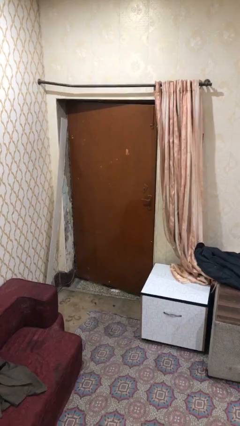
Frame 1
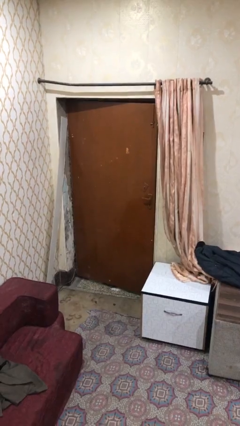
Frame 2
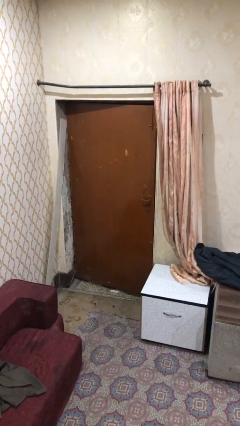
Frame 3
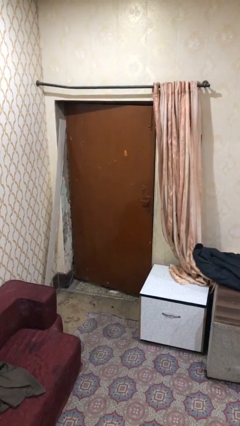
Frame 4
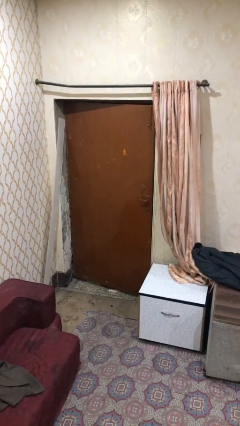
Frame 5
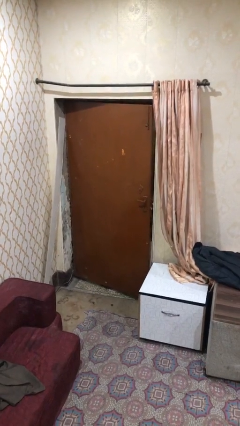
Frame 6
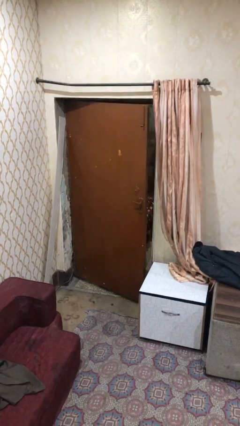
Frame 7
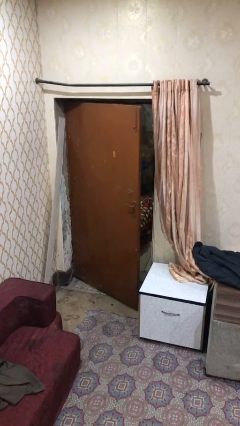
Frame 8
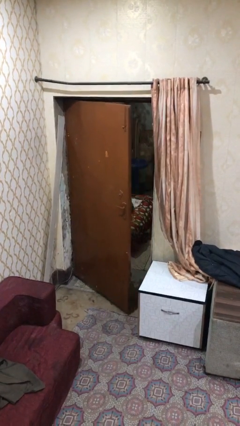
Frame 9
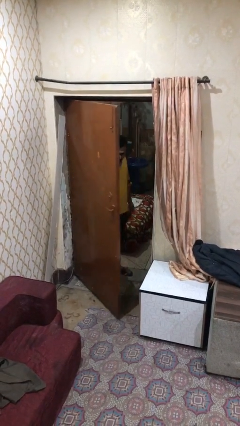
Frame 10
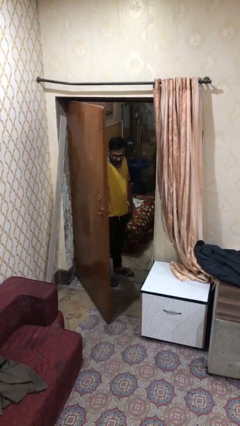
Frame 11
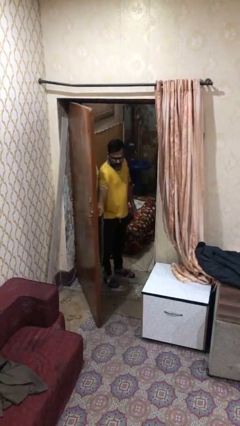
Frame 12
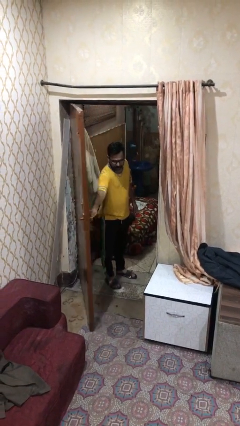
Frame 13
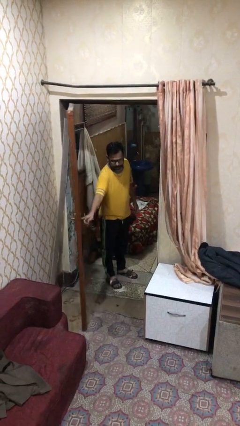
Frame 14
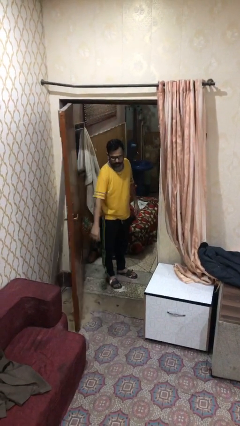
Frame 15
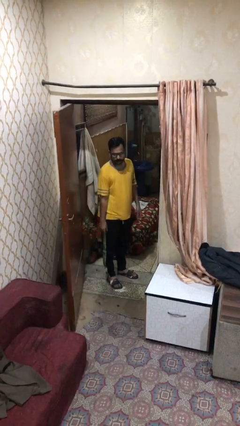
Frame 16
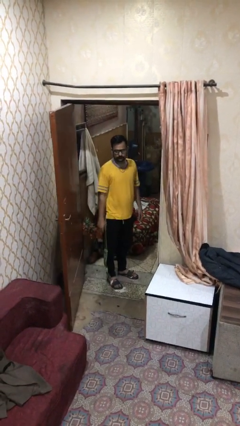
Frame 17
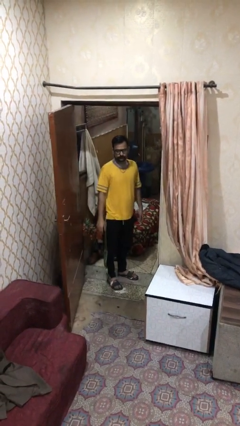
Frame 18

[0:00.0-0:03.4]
person opens facility door

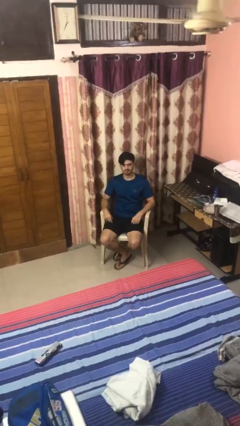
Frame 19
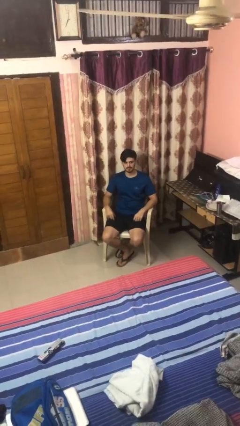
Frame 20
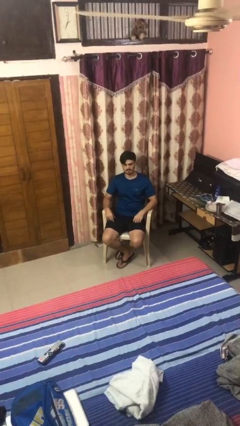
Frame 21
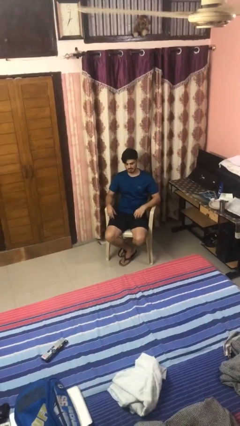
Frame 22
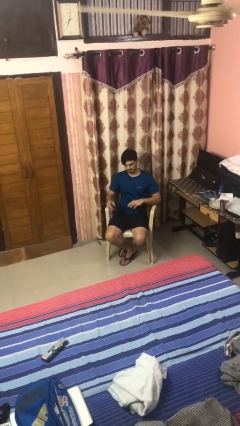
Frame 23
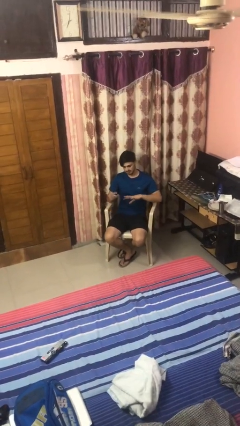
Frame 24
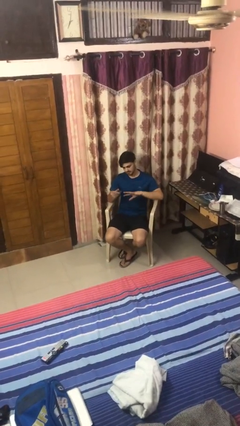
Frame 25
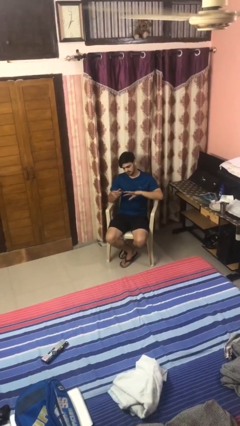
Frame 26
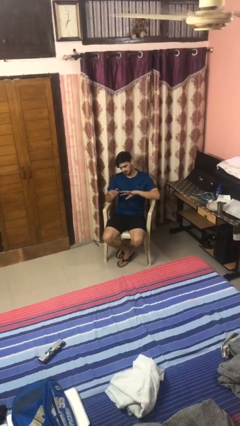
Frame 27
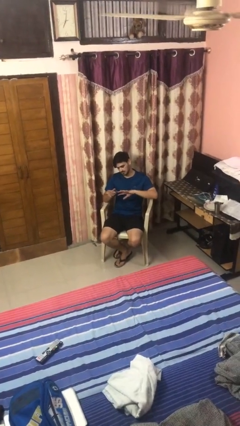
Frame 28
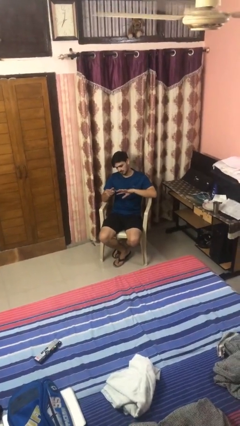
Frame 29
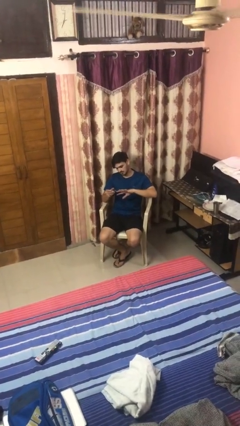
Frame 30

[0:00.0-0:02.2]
person clips fingernails

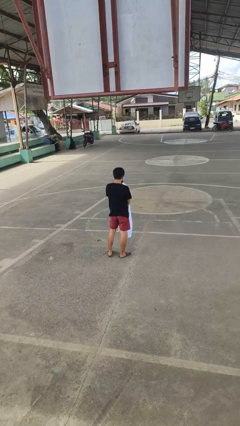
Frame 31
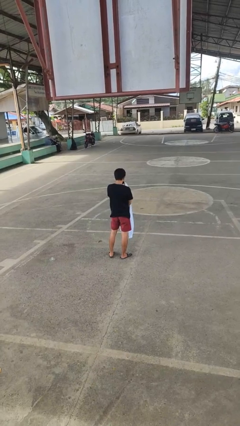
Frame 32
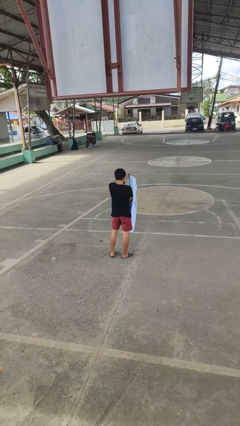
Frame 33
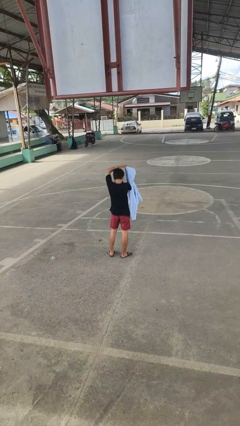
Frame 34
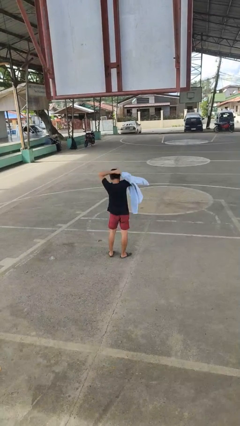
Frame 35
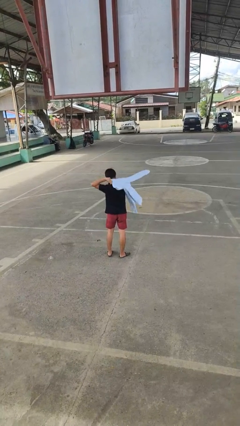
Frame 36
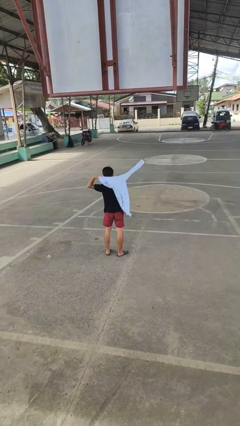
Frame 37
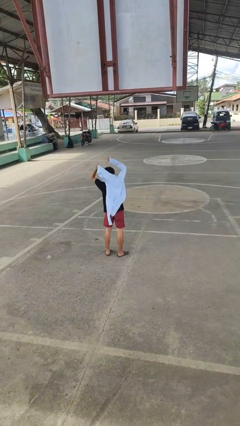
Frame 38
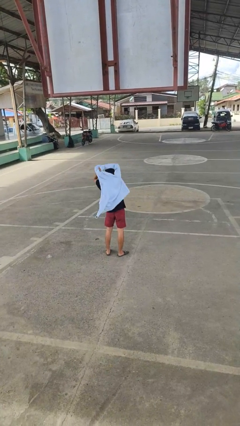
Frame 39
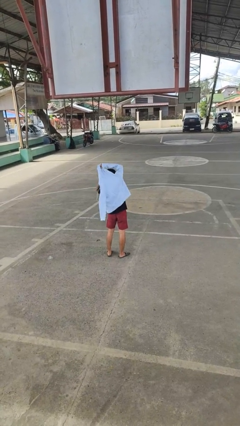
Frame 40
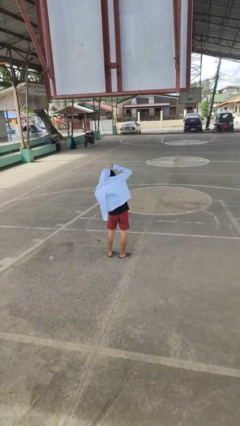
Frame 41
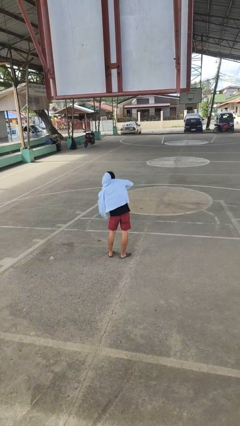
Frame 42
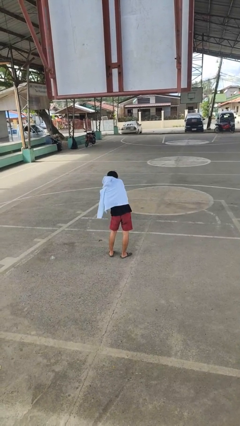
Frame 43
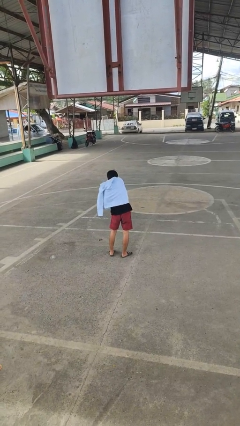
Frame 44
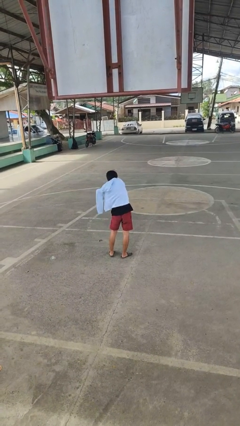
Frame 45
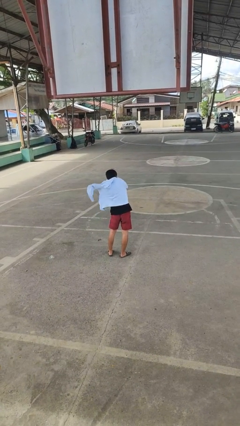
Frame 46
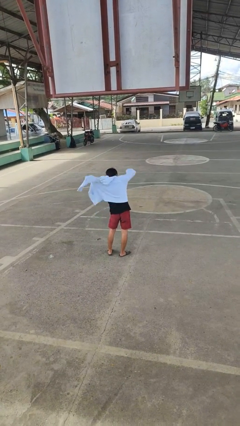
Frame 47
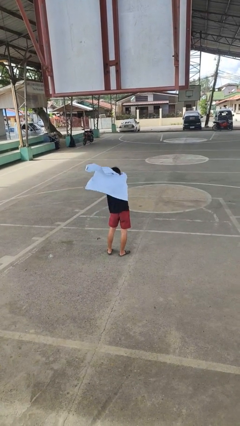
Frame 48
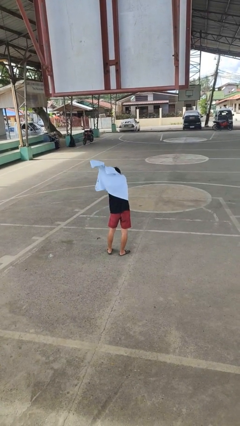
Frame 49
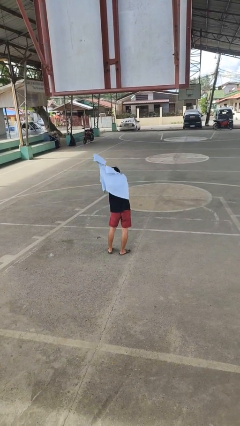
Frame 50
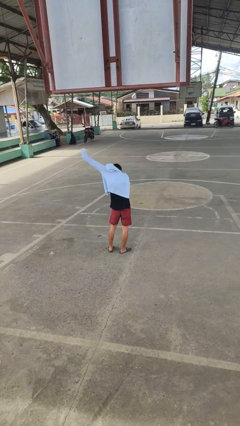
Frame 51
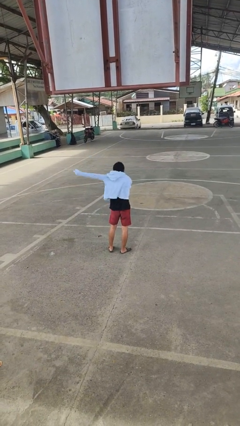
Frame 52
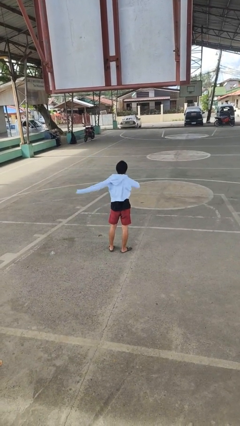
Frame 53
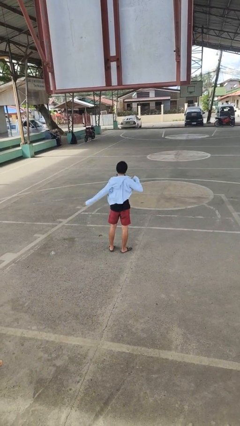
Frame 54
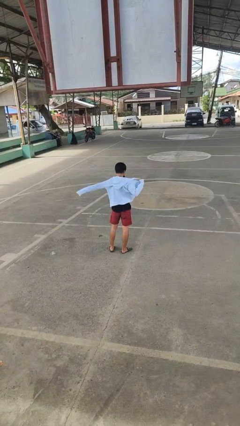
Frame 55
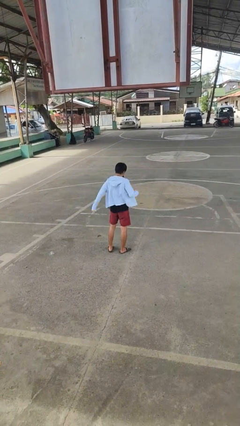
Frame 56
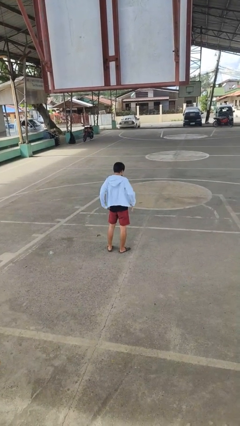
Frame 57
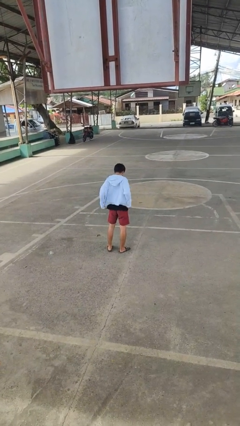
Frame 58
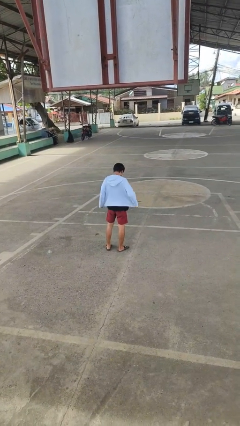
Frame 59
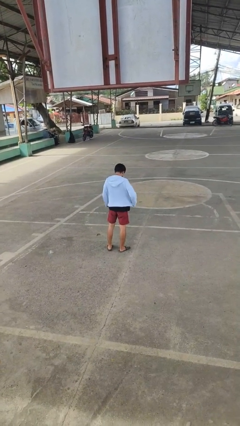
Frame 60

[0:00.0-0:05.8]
person puts on jacket

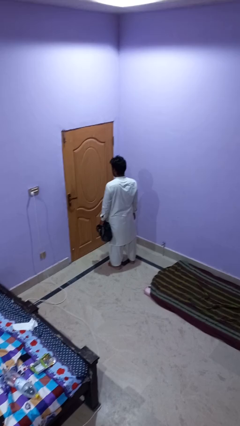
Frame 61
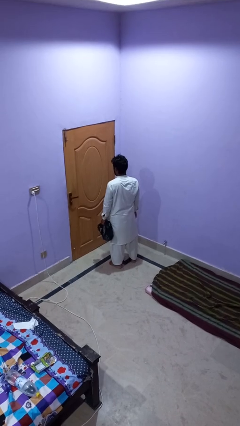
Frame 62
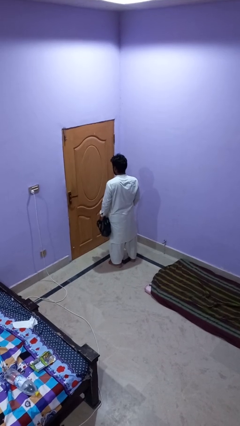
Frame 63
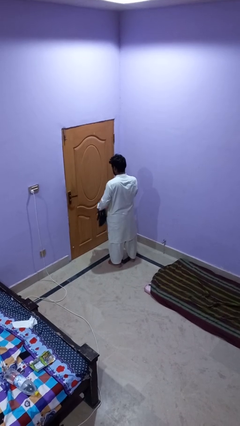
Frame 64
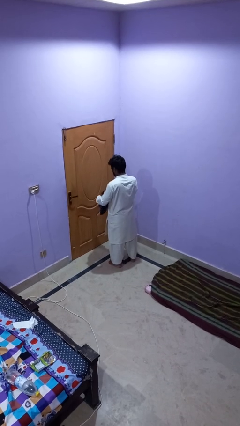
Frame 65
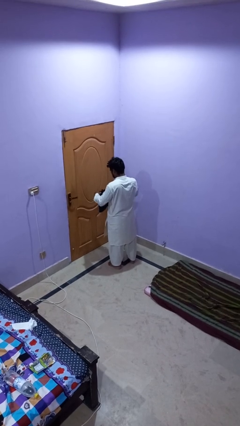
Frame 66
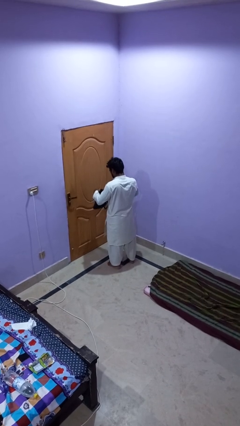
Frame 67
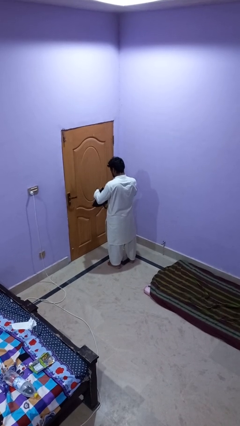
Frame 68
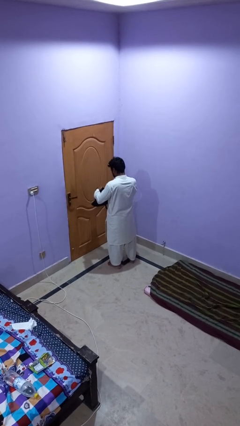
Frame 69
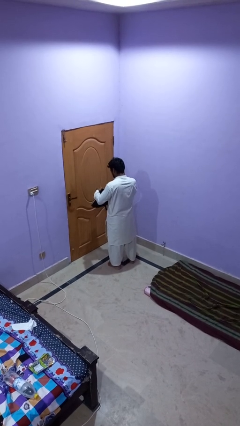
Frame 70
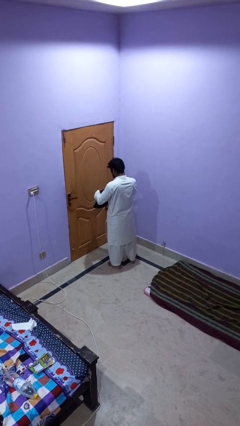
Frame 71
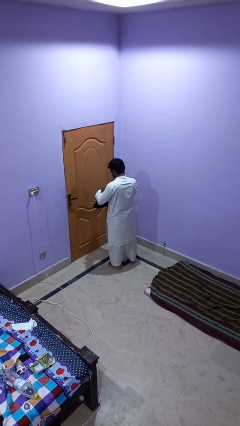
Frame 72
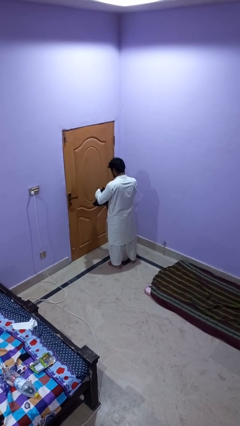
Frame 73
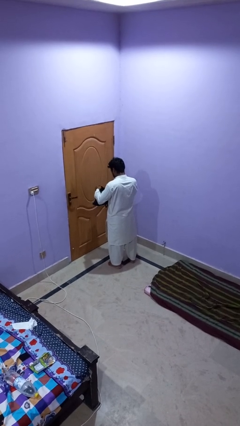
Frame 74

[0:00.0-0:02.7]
person searches in purse

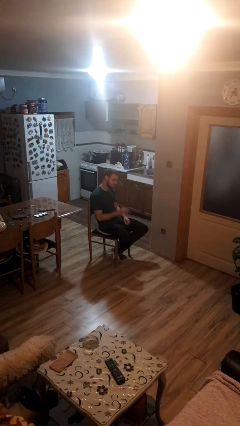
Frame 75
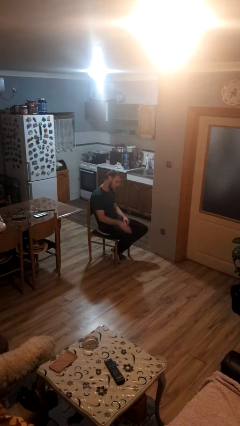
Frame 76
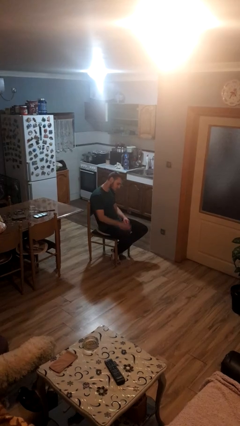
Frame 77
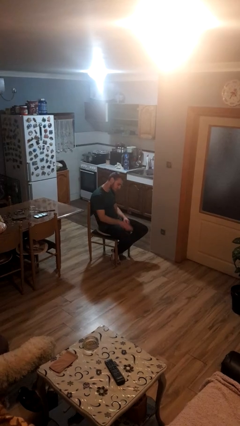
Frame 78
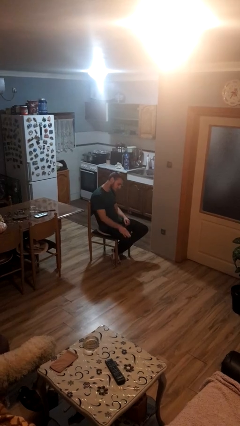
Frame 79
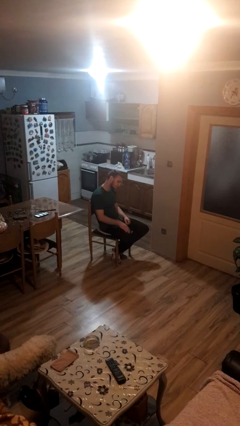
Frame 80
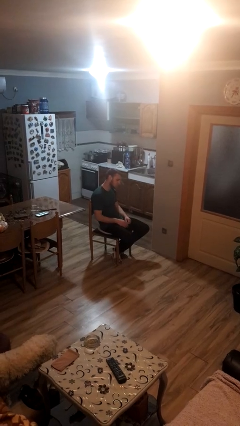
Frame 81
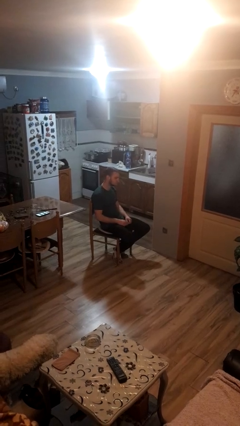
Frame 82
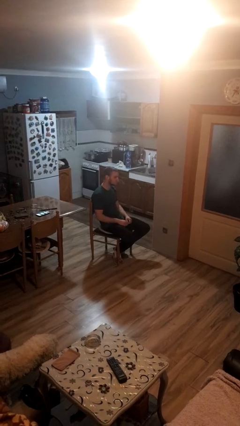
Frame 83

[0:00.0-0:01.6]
person slaps hands on thighs

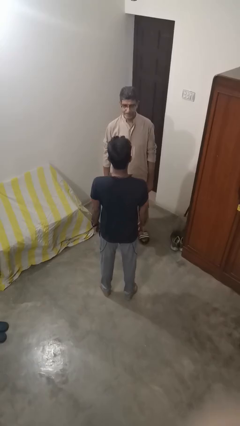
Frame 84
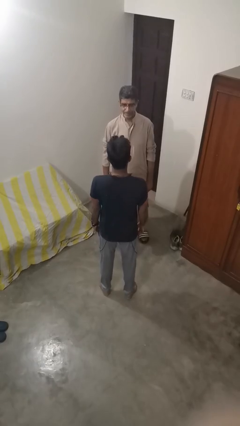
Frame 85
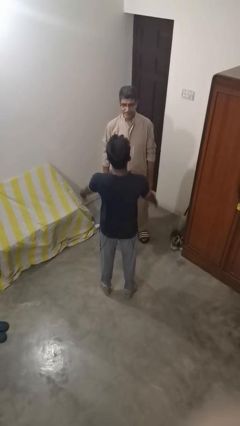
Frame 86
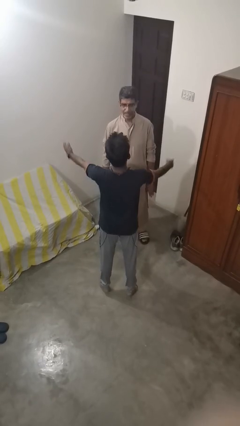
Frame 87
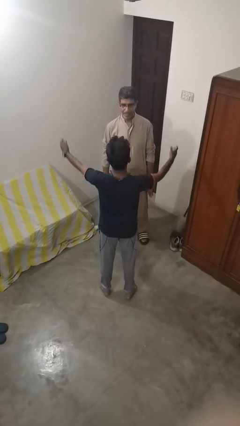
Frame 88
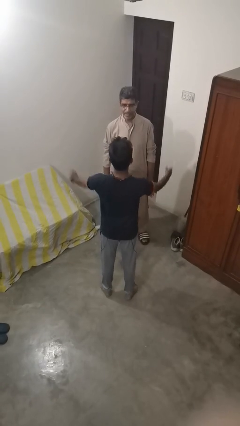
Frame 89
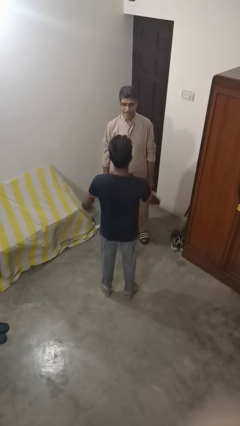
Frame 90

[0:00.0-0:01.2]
person laughs with person

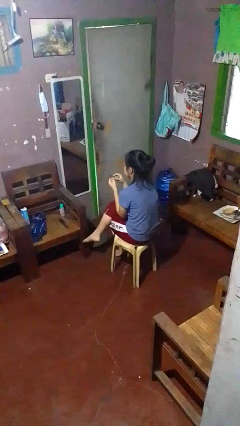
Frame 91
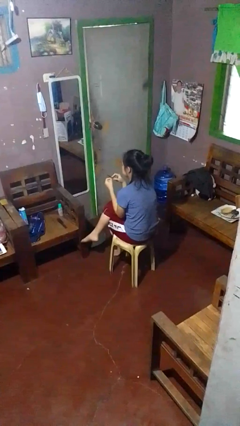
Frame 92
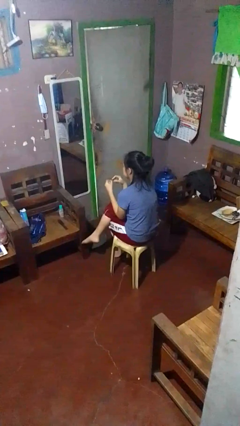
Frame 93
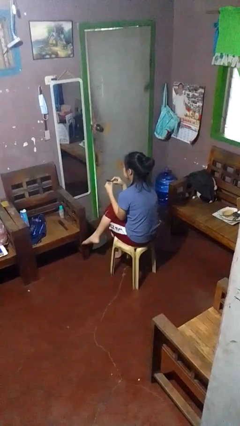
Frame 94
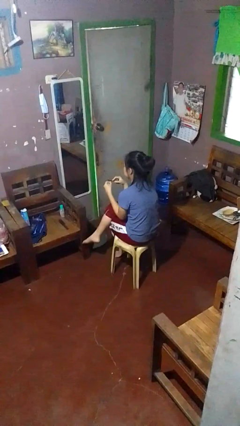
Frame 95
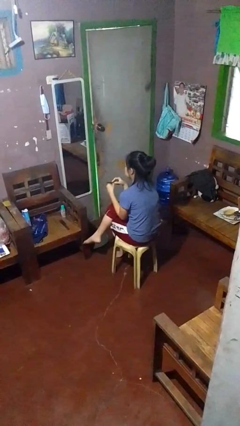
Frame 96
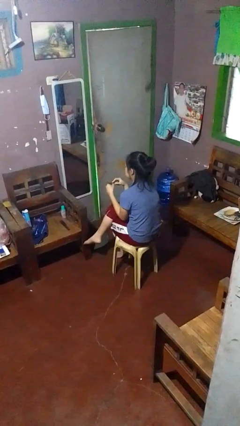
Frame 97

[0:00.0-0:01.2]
person files fingernails
